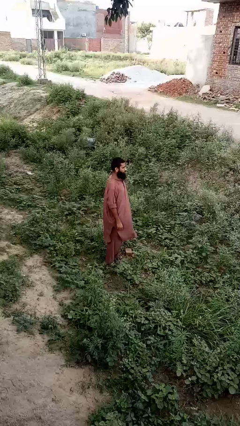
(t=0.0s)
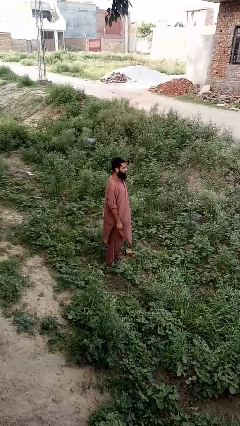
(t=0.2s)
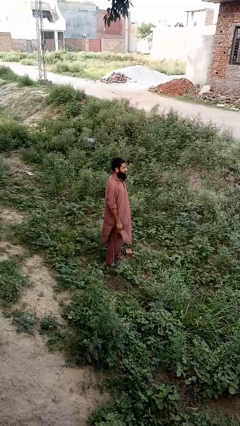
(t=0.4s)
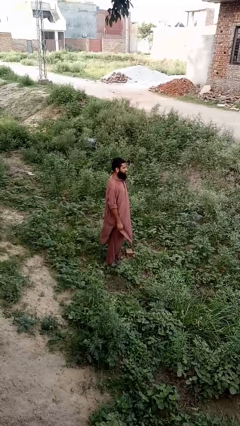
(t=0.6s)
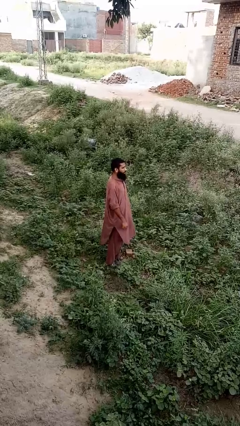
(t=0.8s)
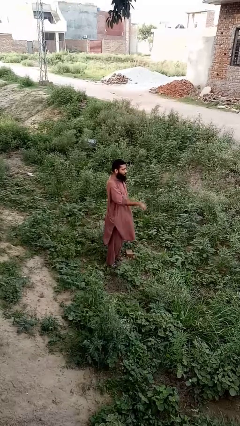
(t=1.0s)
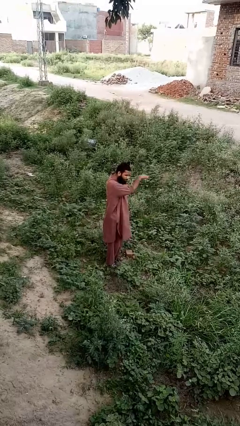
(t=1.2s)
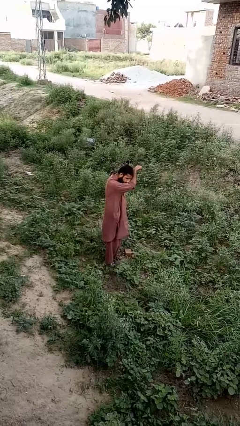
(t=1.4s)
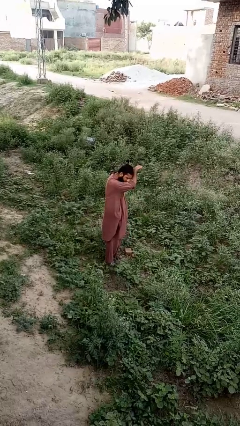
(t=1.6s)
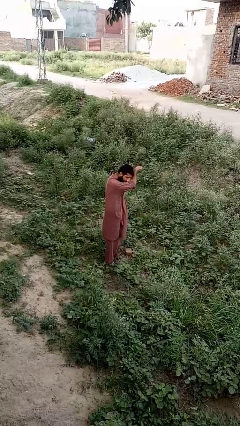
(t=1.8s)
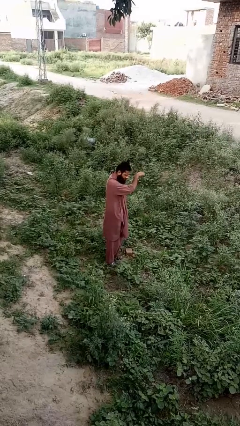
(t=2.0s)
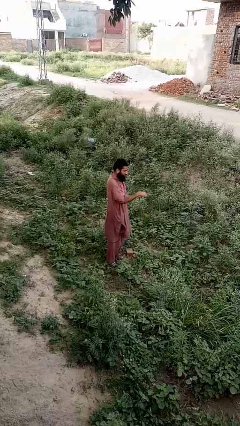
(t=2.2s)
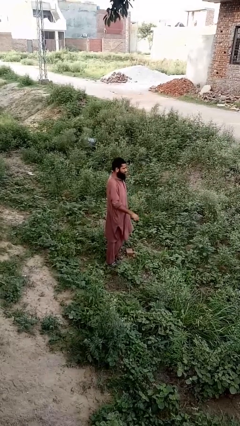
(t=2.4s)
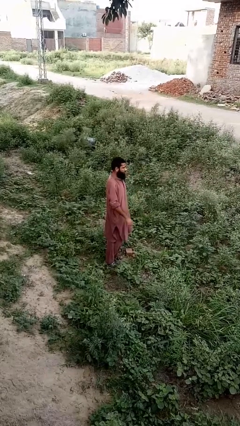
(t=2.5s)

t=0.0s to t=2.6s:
person sneezes into arm

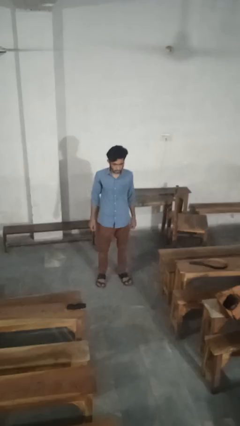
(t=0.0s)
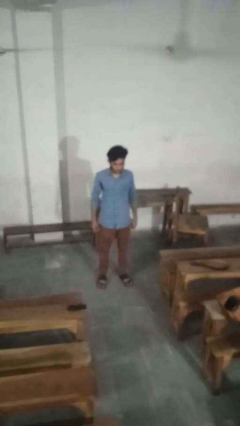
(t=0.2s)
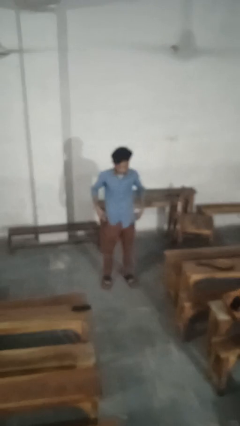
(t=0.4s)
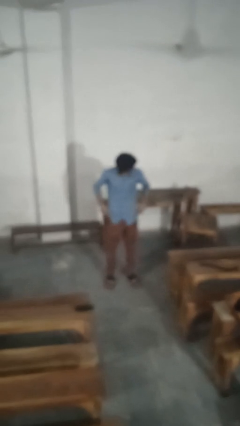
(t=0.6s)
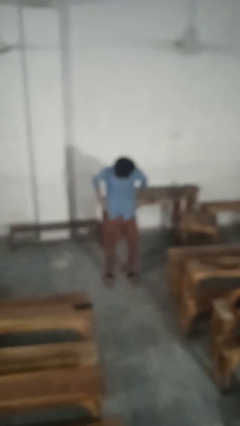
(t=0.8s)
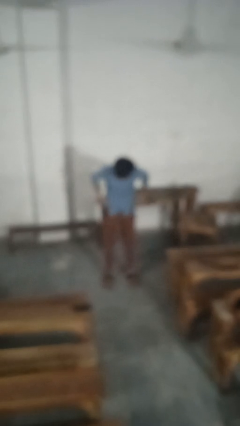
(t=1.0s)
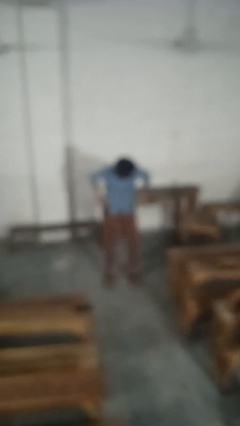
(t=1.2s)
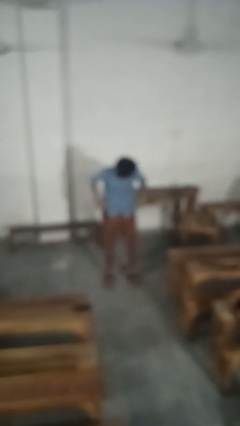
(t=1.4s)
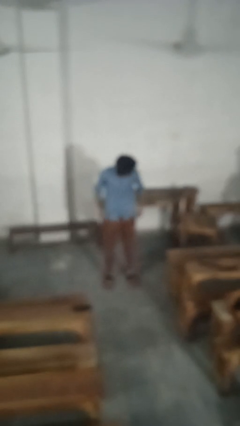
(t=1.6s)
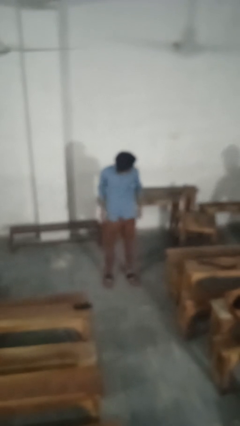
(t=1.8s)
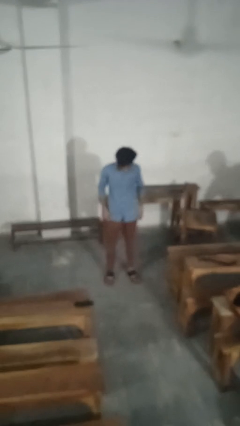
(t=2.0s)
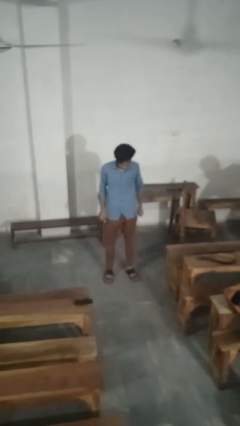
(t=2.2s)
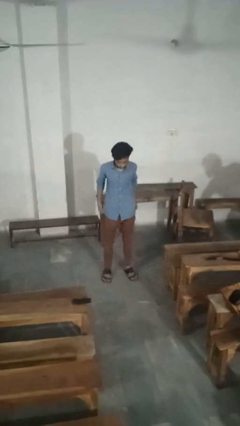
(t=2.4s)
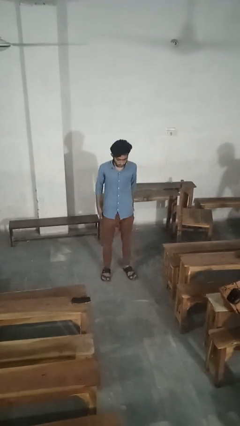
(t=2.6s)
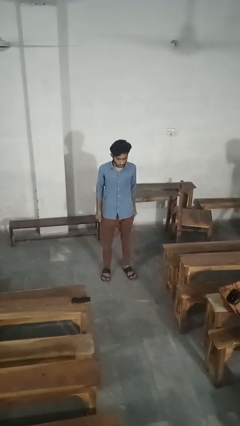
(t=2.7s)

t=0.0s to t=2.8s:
person hikes up pants

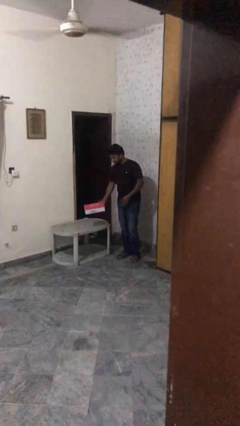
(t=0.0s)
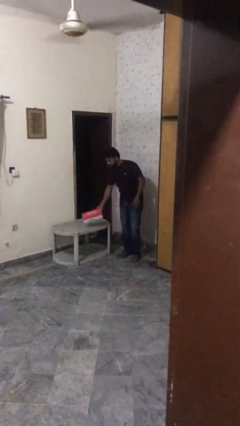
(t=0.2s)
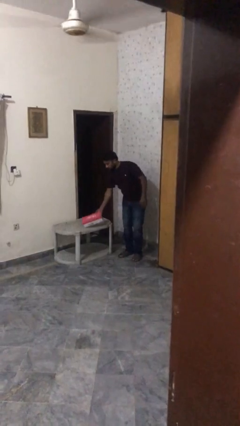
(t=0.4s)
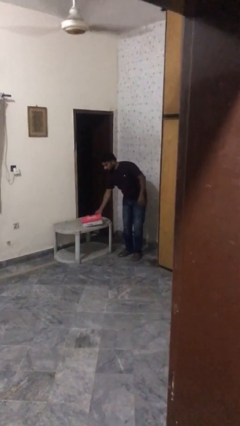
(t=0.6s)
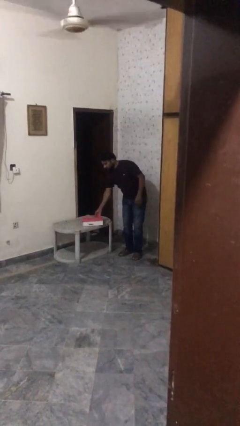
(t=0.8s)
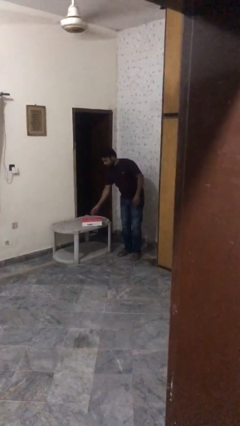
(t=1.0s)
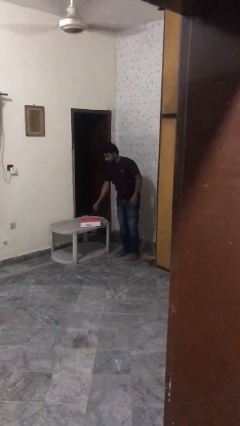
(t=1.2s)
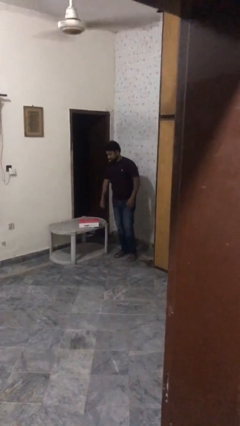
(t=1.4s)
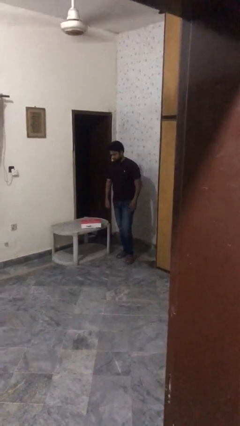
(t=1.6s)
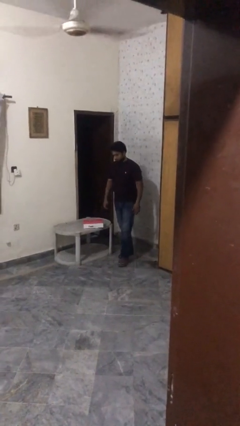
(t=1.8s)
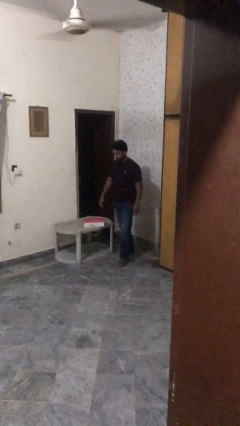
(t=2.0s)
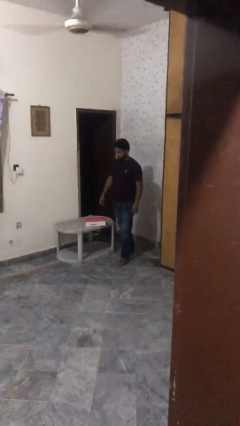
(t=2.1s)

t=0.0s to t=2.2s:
person puts down object on table

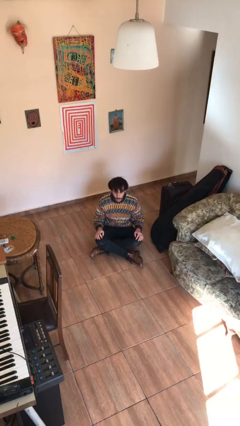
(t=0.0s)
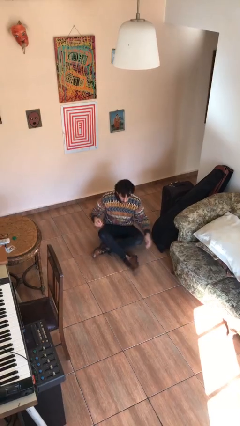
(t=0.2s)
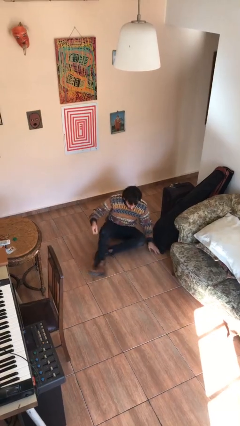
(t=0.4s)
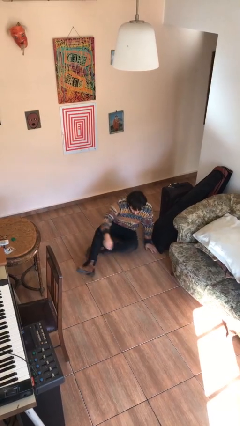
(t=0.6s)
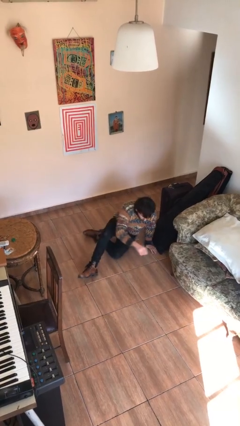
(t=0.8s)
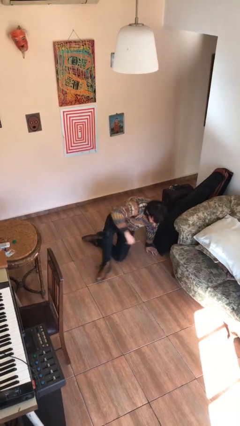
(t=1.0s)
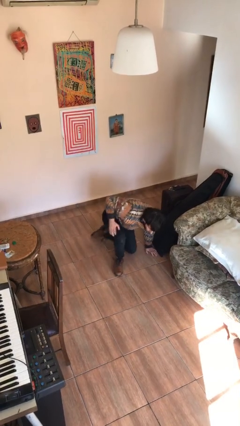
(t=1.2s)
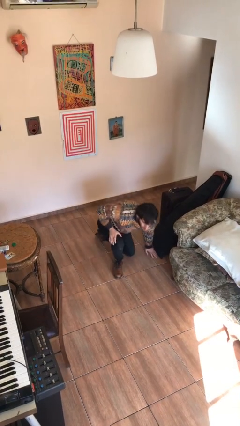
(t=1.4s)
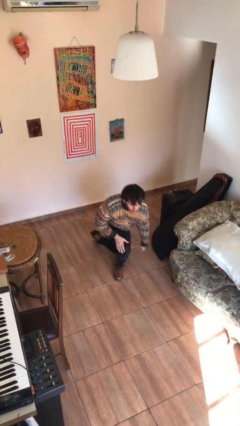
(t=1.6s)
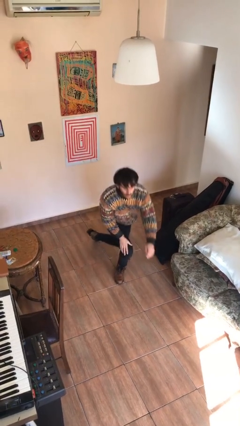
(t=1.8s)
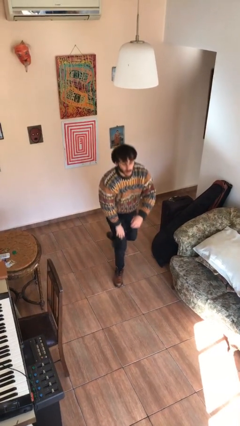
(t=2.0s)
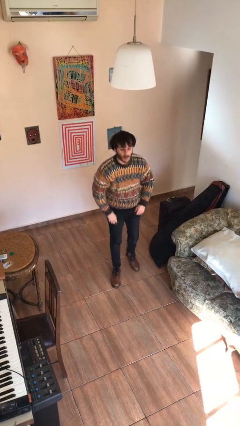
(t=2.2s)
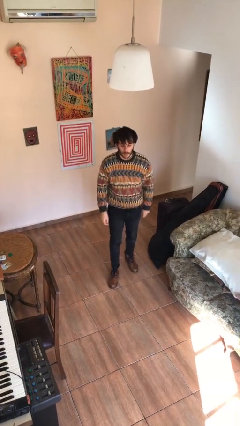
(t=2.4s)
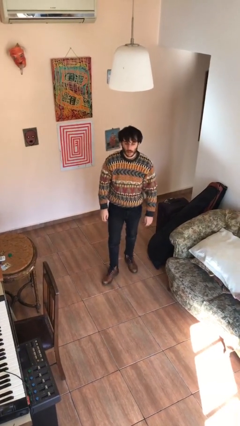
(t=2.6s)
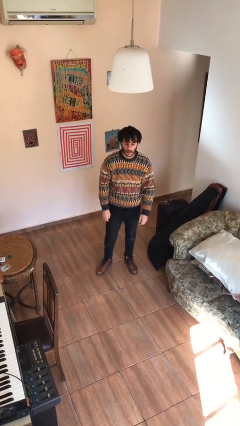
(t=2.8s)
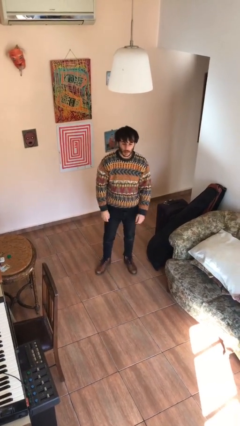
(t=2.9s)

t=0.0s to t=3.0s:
person stands up from floor

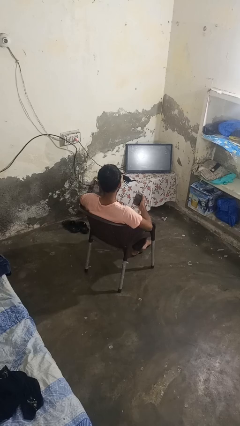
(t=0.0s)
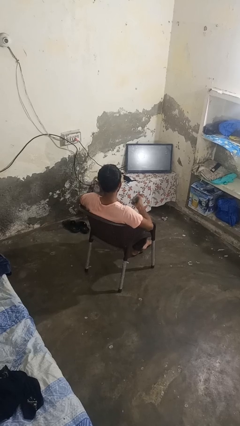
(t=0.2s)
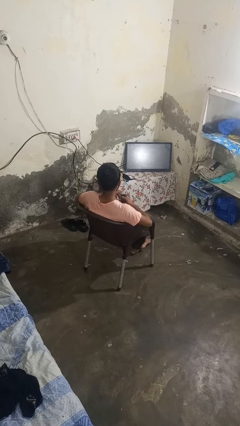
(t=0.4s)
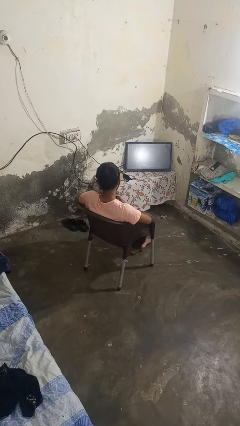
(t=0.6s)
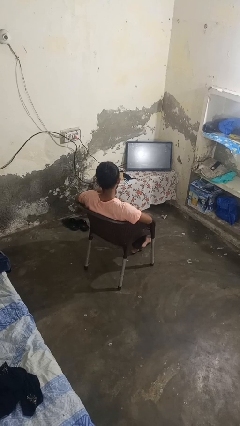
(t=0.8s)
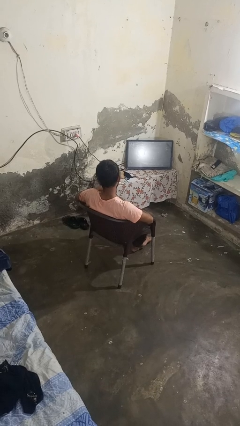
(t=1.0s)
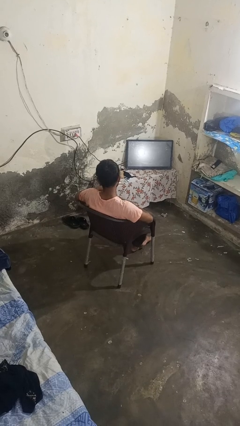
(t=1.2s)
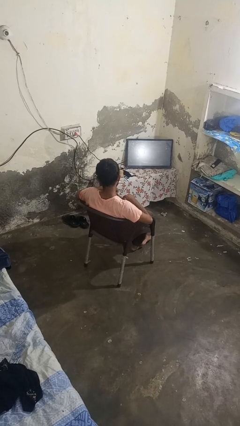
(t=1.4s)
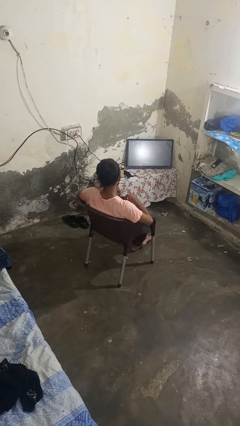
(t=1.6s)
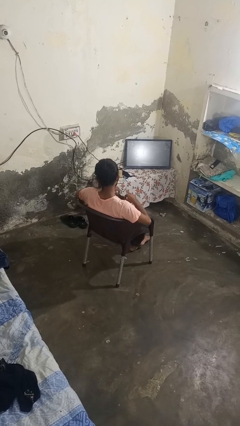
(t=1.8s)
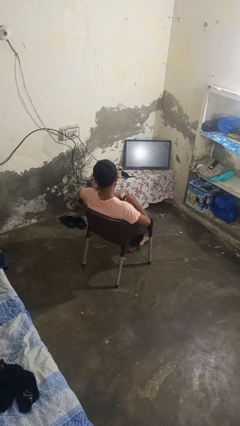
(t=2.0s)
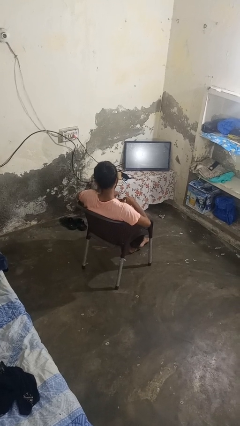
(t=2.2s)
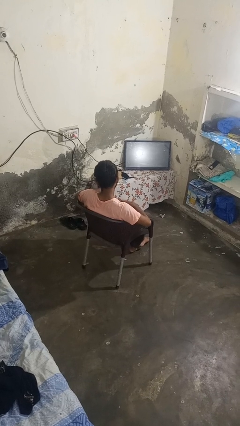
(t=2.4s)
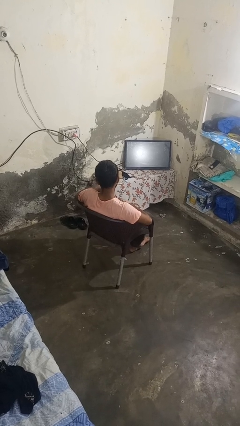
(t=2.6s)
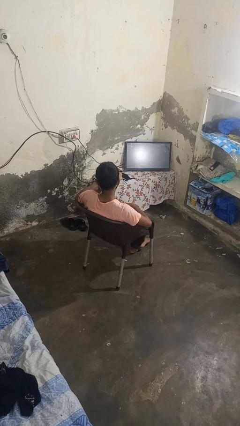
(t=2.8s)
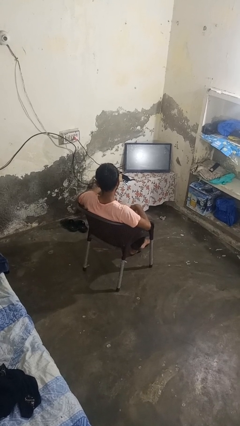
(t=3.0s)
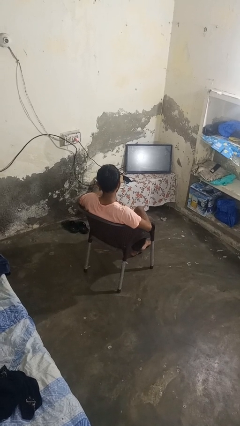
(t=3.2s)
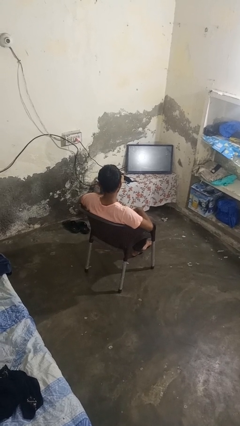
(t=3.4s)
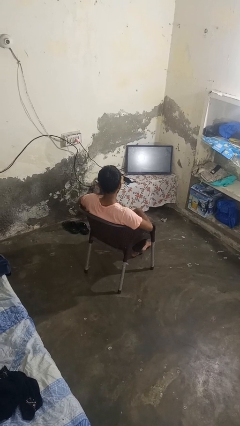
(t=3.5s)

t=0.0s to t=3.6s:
person puts object into purse

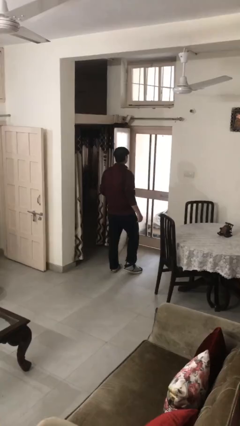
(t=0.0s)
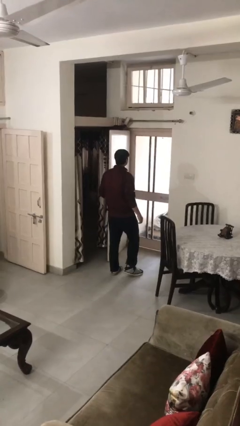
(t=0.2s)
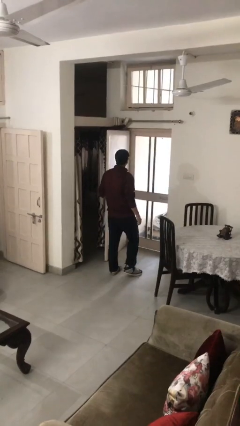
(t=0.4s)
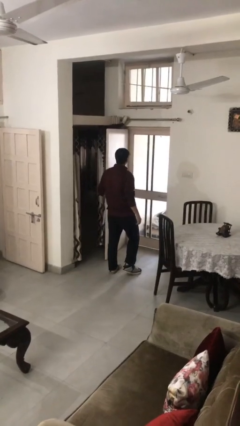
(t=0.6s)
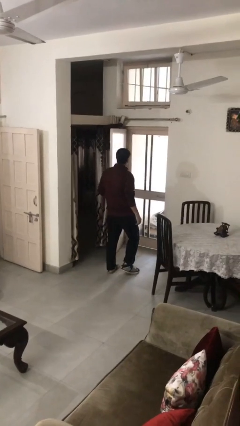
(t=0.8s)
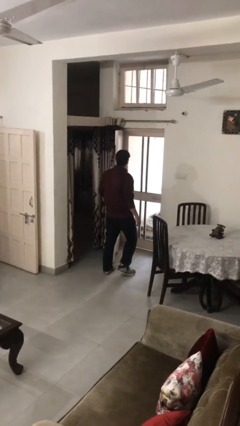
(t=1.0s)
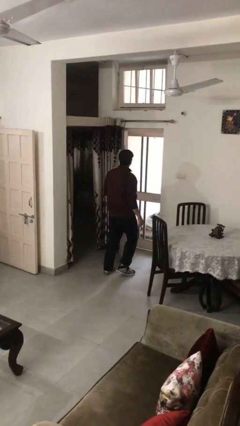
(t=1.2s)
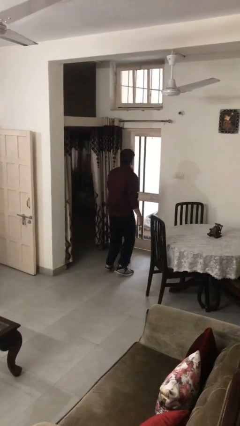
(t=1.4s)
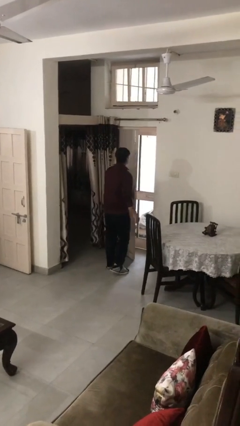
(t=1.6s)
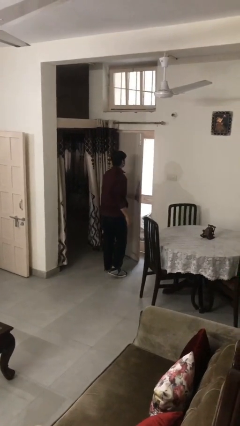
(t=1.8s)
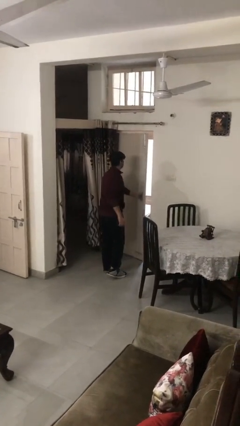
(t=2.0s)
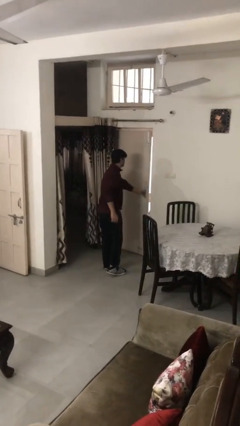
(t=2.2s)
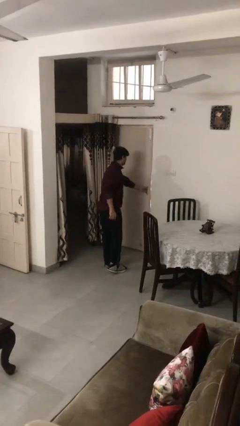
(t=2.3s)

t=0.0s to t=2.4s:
person closes facility door

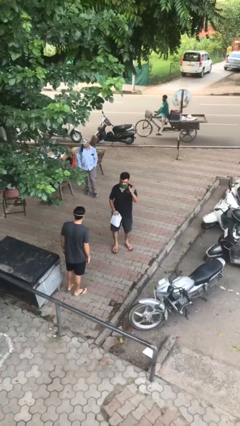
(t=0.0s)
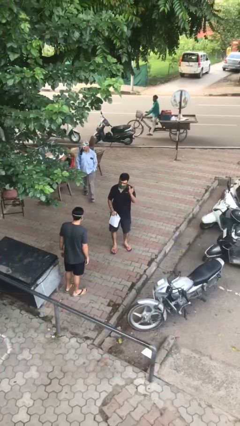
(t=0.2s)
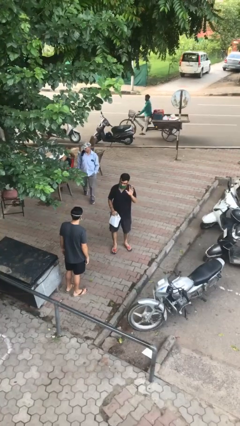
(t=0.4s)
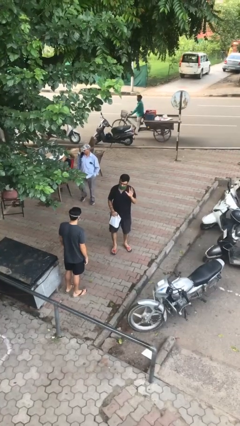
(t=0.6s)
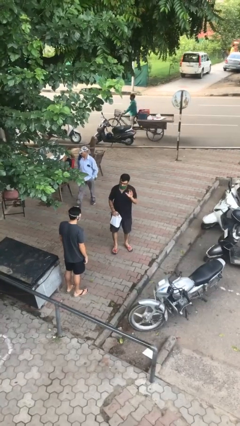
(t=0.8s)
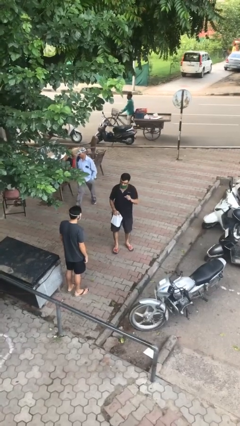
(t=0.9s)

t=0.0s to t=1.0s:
person waves at person
